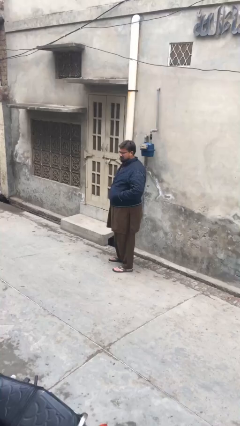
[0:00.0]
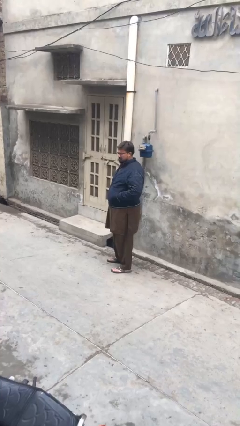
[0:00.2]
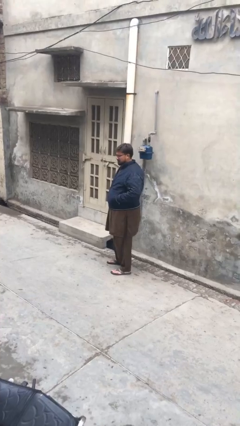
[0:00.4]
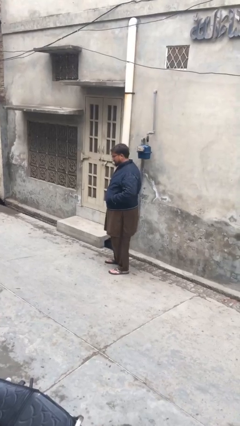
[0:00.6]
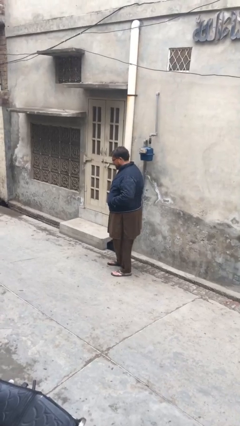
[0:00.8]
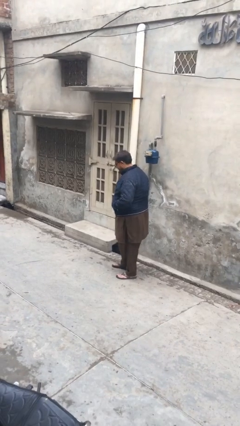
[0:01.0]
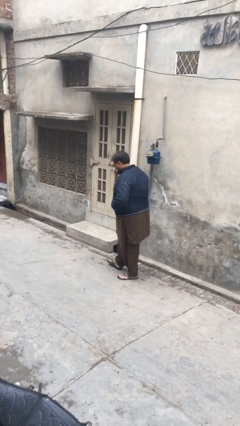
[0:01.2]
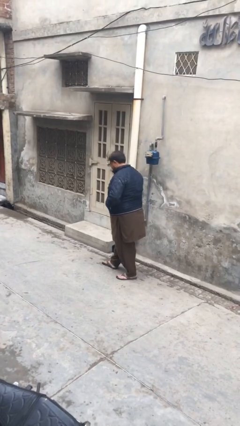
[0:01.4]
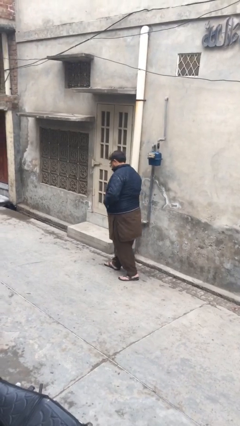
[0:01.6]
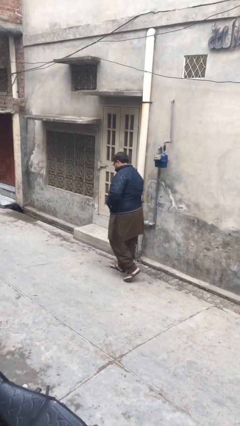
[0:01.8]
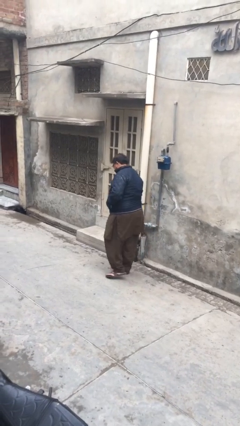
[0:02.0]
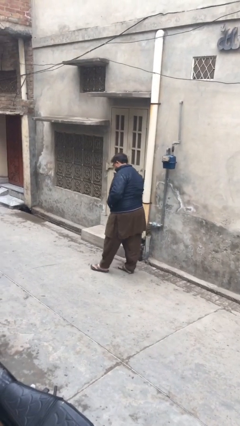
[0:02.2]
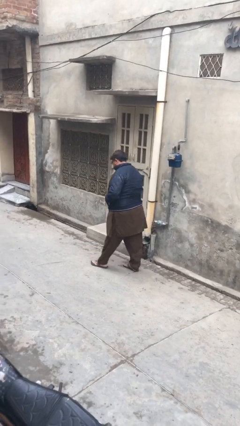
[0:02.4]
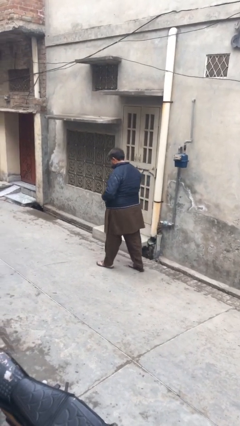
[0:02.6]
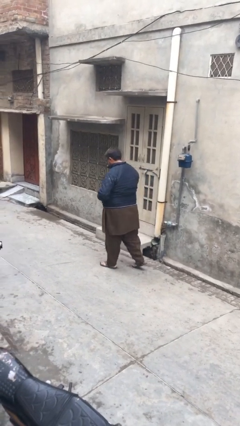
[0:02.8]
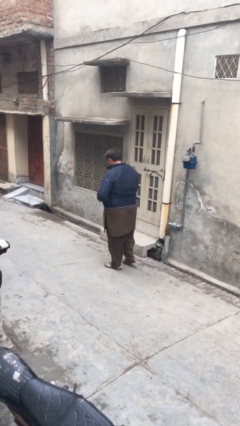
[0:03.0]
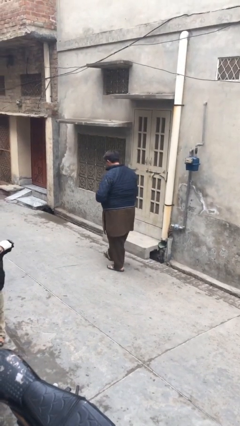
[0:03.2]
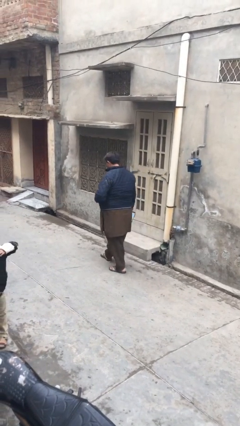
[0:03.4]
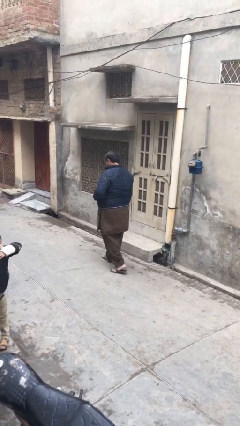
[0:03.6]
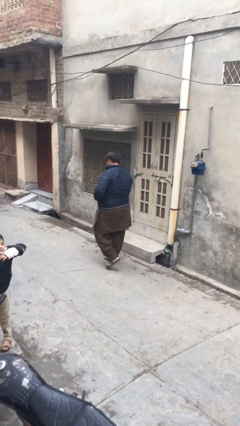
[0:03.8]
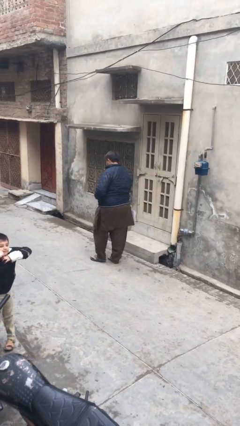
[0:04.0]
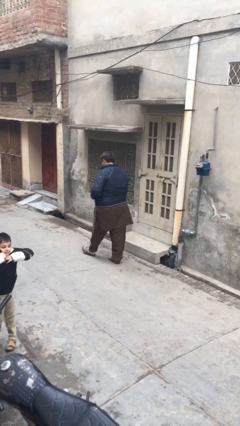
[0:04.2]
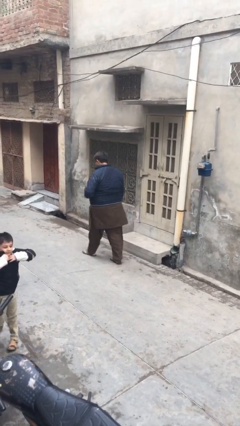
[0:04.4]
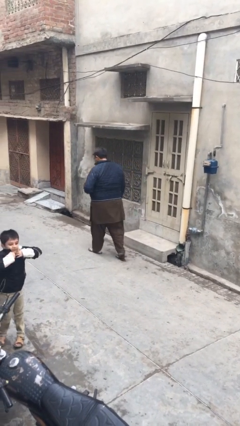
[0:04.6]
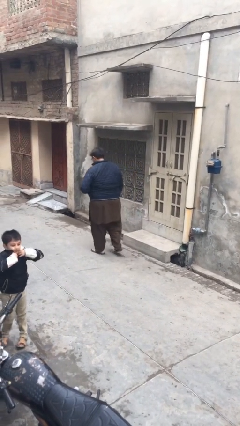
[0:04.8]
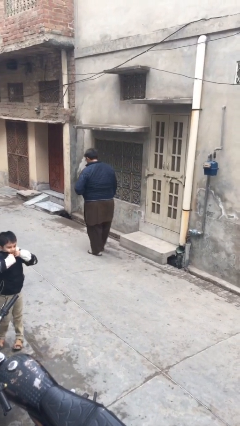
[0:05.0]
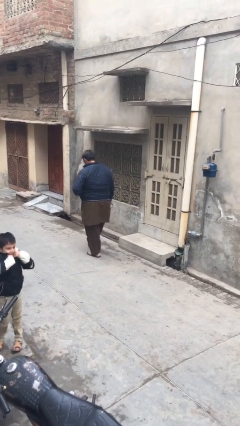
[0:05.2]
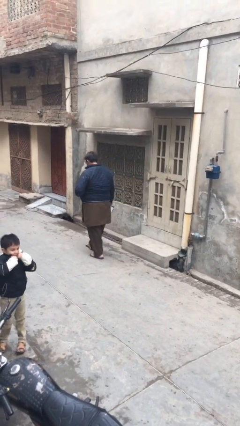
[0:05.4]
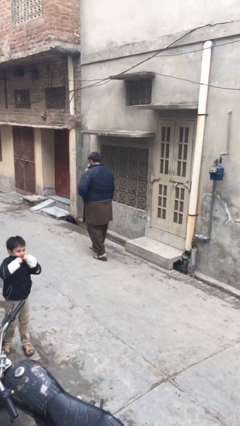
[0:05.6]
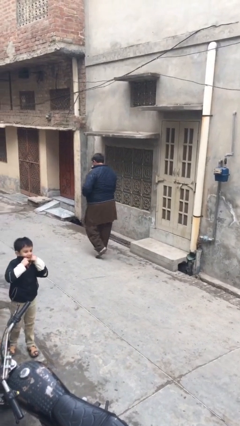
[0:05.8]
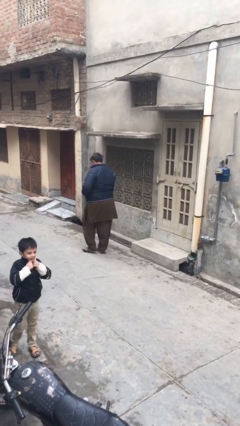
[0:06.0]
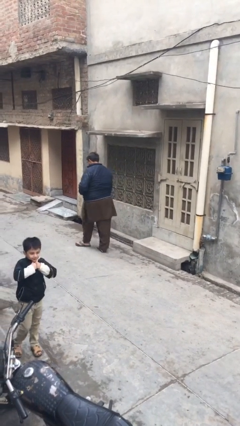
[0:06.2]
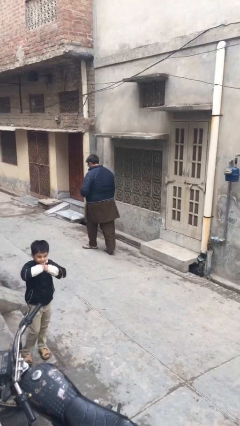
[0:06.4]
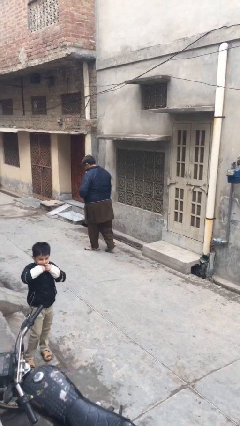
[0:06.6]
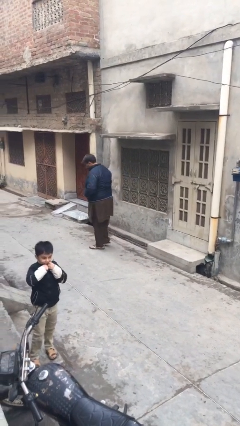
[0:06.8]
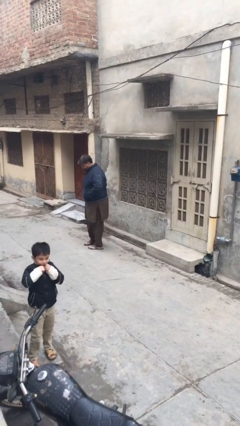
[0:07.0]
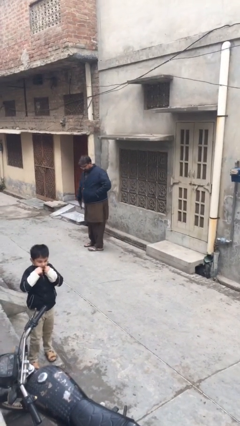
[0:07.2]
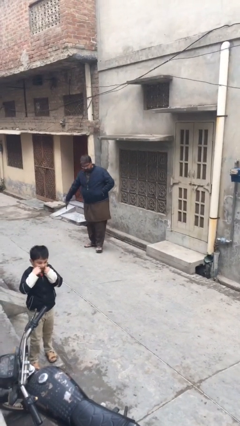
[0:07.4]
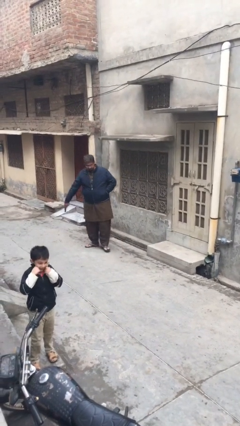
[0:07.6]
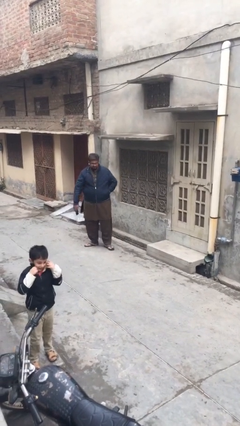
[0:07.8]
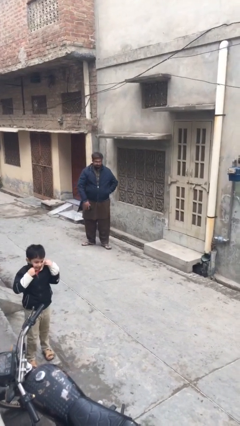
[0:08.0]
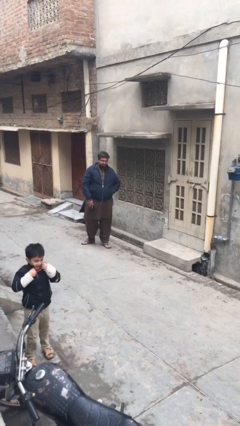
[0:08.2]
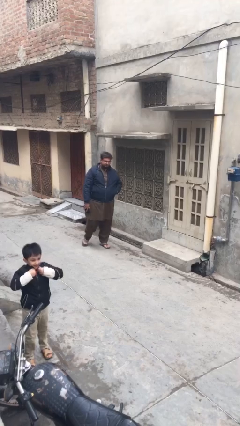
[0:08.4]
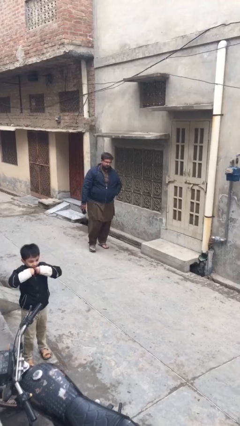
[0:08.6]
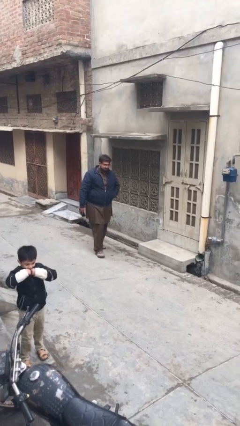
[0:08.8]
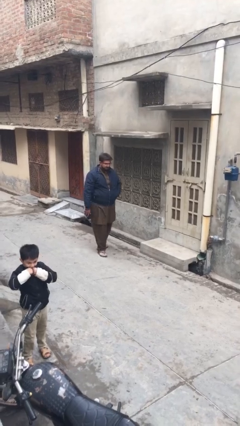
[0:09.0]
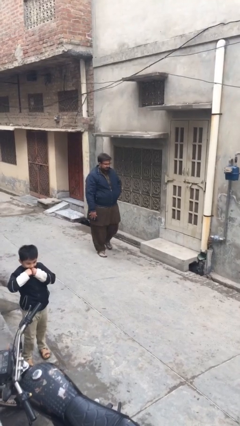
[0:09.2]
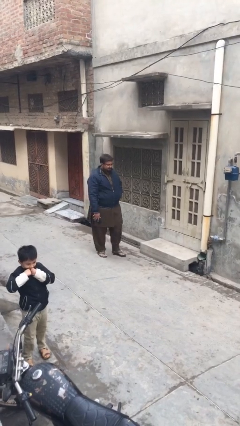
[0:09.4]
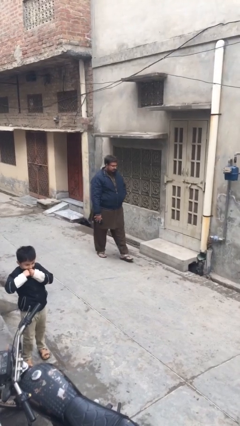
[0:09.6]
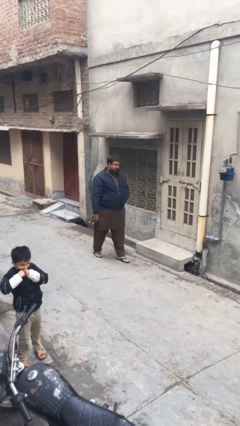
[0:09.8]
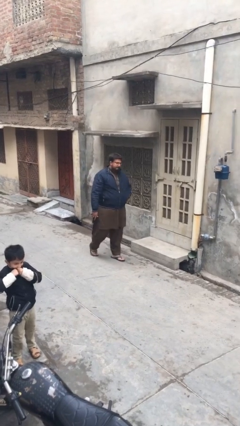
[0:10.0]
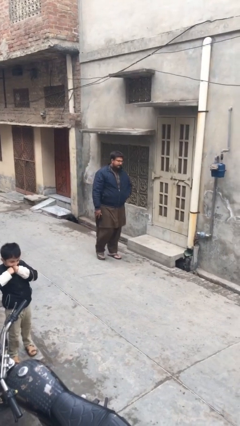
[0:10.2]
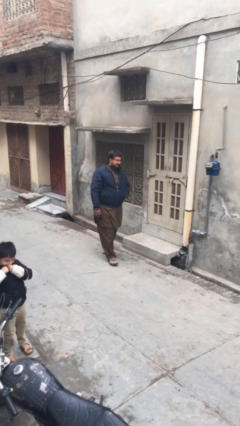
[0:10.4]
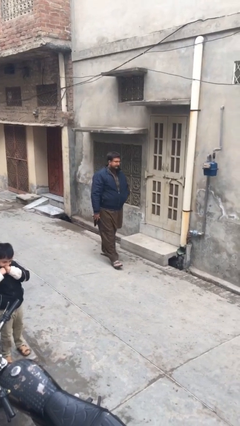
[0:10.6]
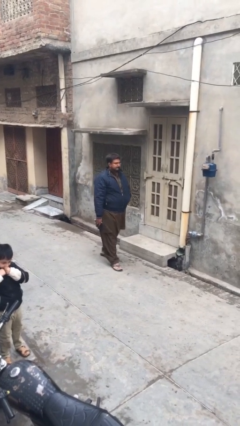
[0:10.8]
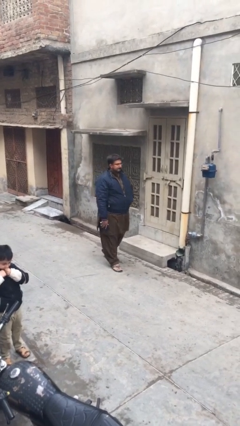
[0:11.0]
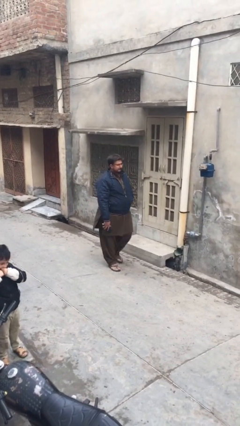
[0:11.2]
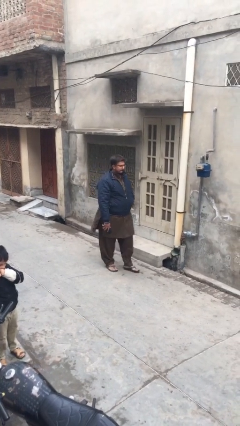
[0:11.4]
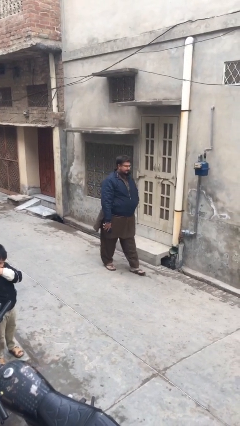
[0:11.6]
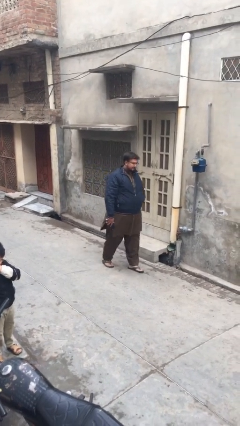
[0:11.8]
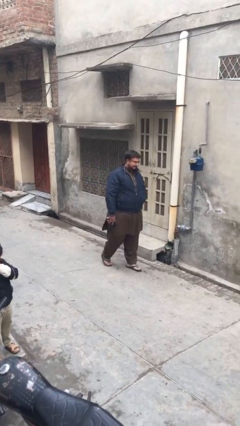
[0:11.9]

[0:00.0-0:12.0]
person walks

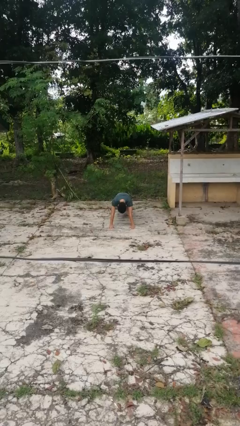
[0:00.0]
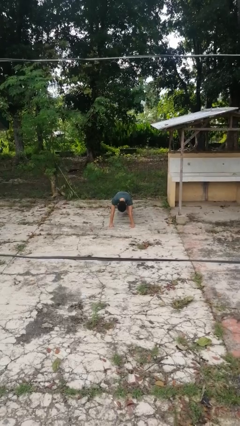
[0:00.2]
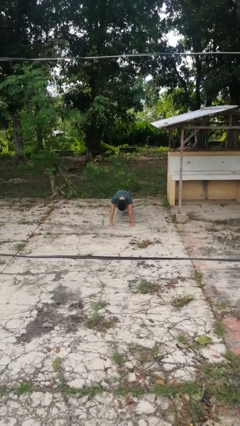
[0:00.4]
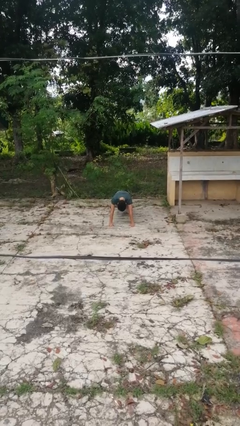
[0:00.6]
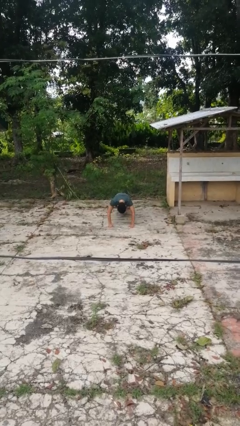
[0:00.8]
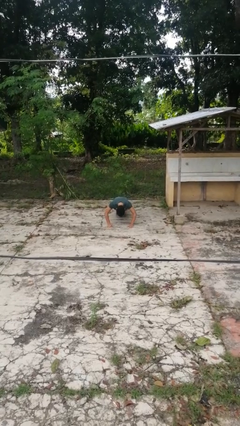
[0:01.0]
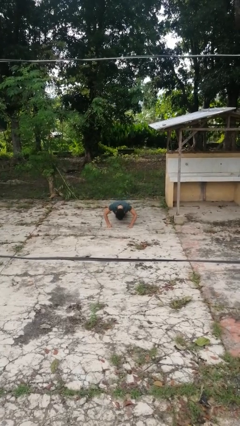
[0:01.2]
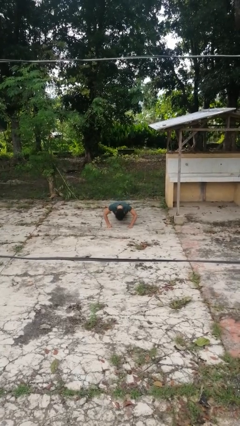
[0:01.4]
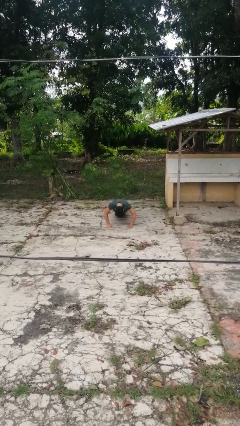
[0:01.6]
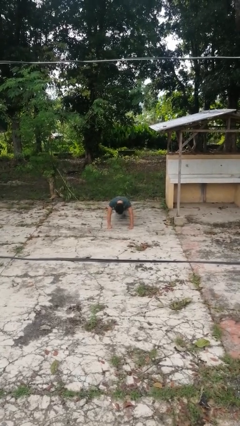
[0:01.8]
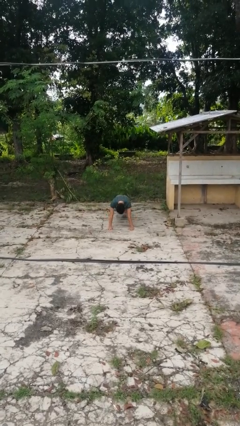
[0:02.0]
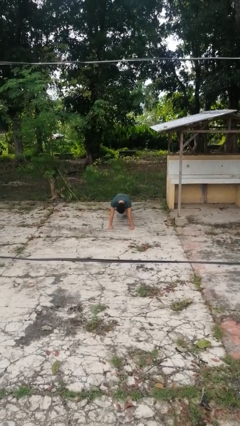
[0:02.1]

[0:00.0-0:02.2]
person exercises with pushup

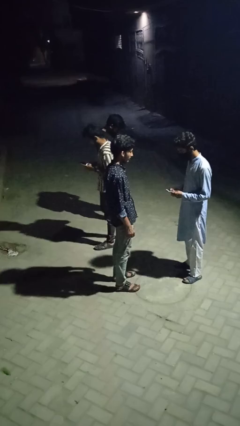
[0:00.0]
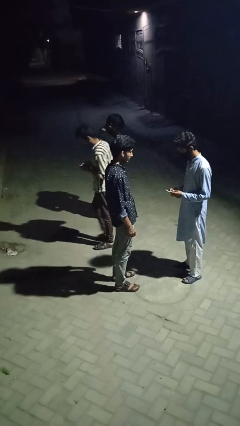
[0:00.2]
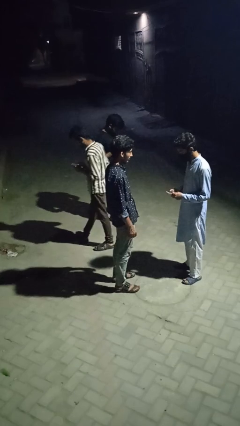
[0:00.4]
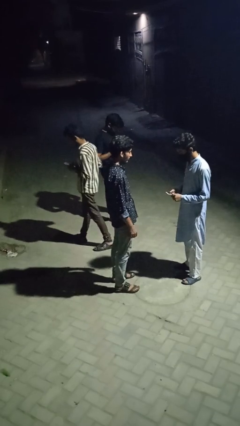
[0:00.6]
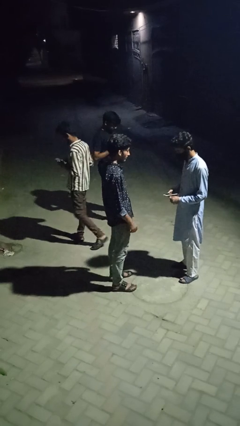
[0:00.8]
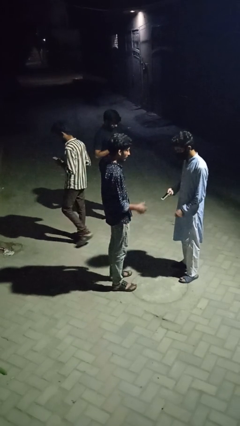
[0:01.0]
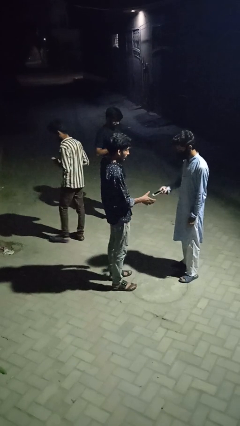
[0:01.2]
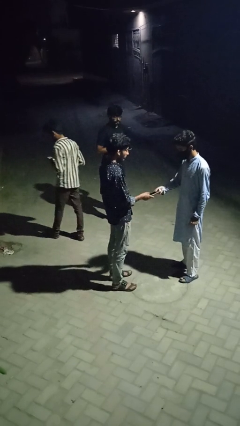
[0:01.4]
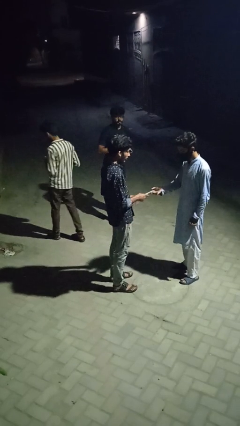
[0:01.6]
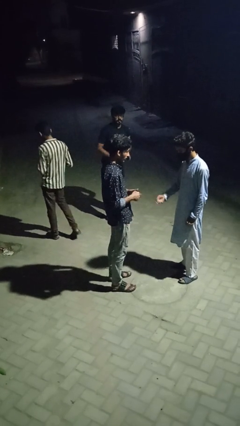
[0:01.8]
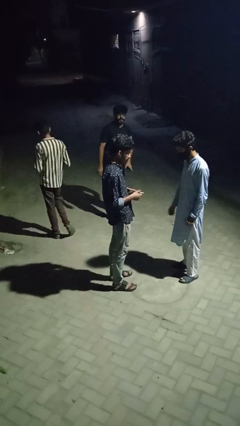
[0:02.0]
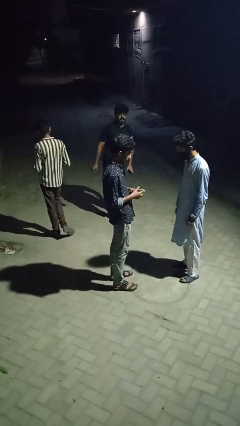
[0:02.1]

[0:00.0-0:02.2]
person transfers object to person

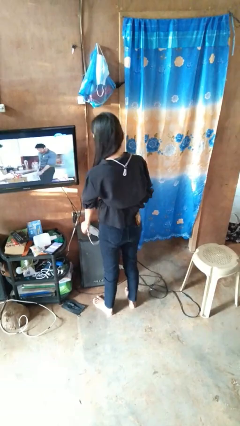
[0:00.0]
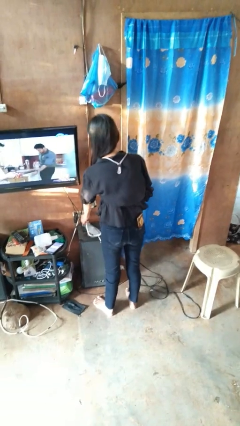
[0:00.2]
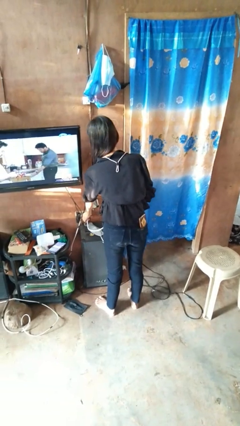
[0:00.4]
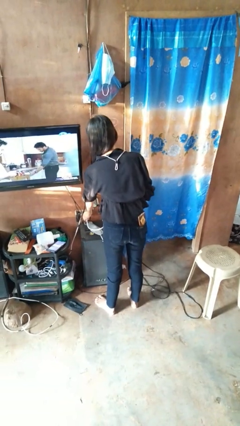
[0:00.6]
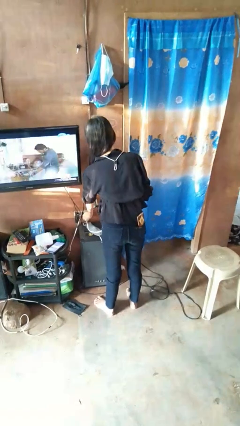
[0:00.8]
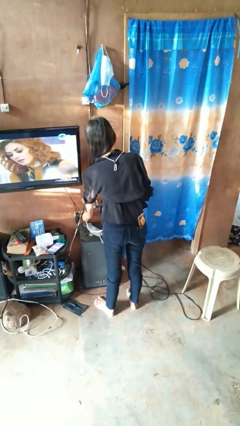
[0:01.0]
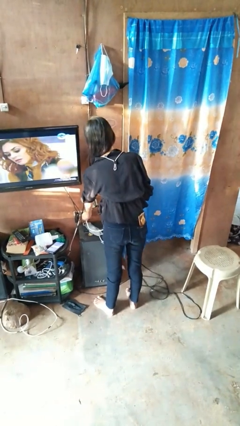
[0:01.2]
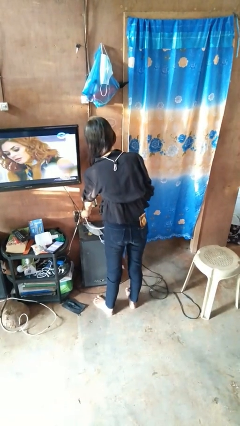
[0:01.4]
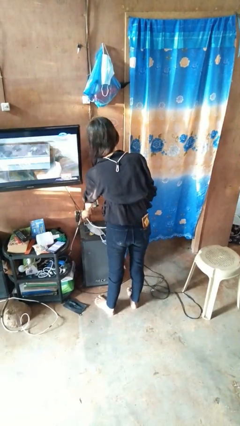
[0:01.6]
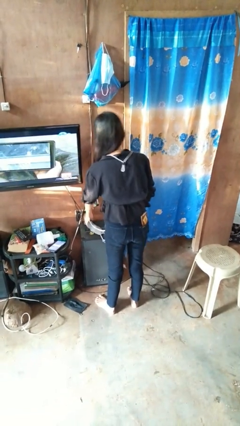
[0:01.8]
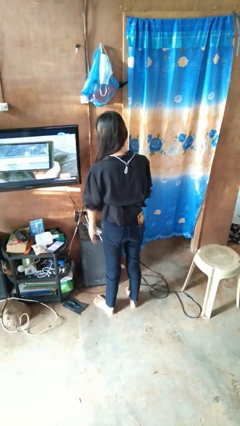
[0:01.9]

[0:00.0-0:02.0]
person plugs into electrical socket
